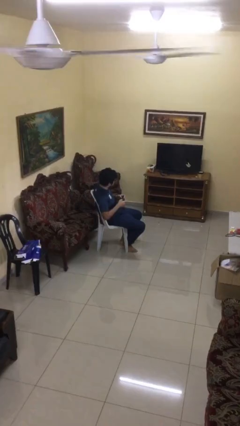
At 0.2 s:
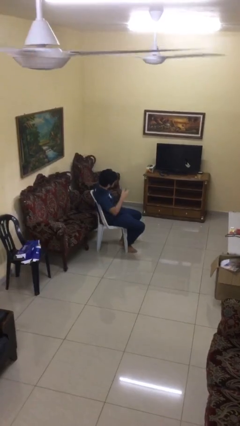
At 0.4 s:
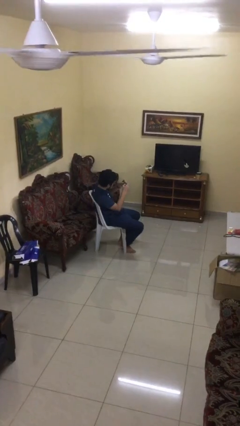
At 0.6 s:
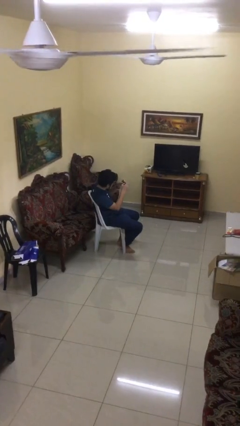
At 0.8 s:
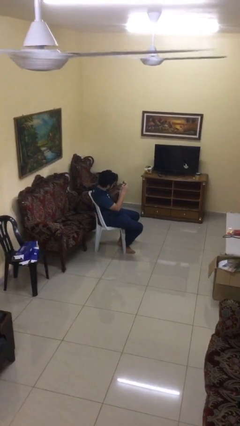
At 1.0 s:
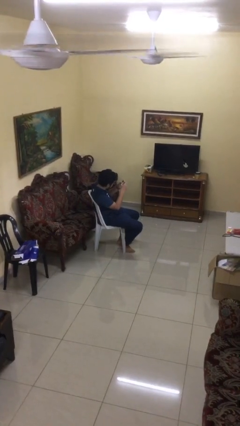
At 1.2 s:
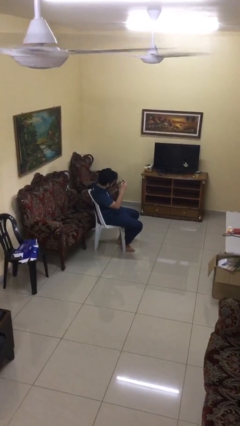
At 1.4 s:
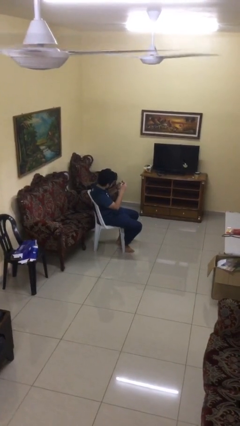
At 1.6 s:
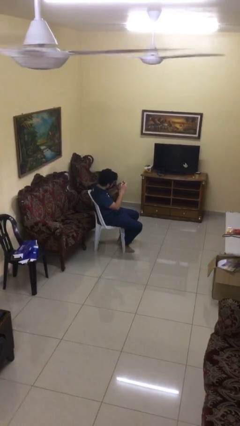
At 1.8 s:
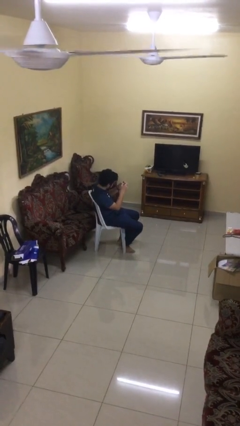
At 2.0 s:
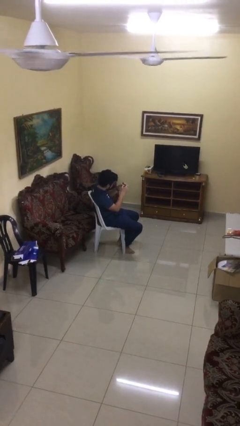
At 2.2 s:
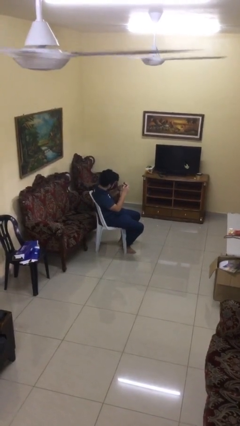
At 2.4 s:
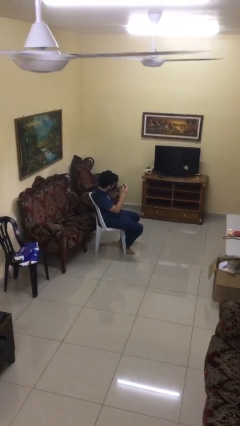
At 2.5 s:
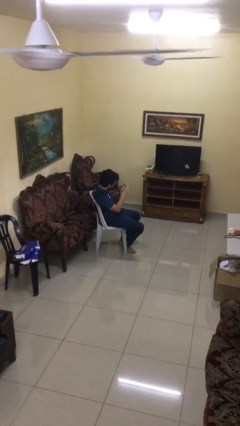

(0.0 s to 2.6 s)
person interacts with handheld game

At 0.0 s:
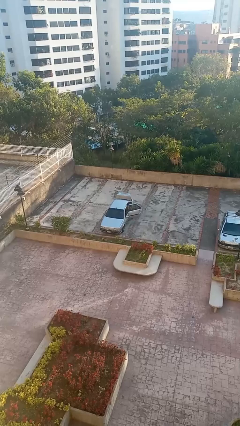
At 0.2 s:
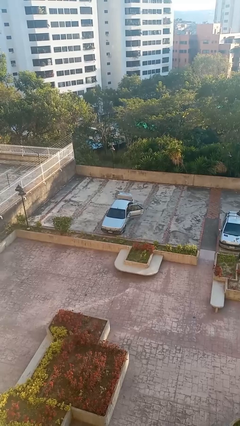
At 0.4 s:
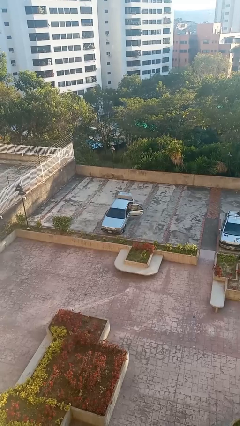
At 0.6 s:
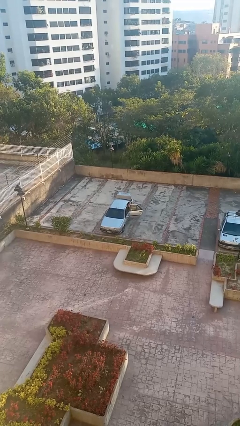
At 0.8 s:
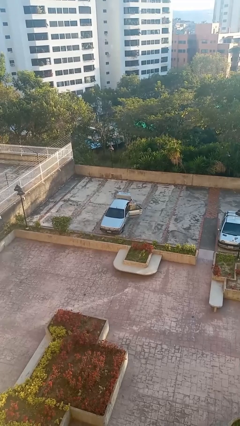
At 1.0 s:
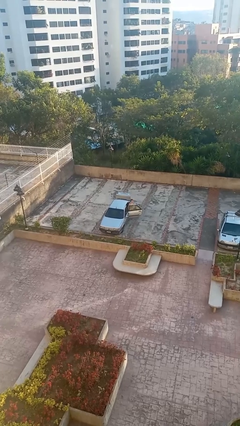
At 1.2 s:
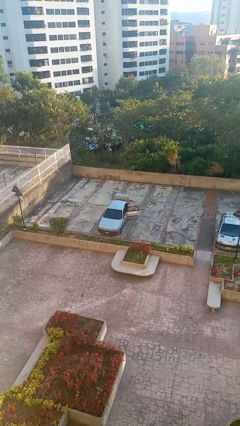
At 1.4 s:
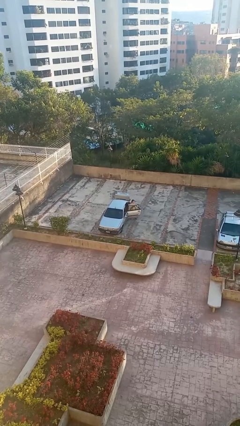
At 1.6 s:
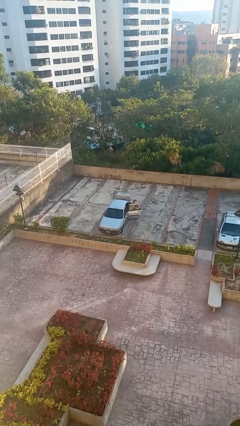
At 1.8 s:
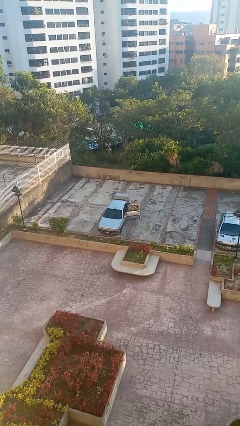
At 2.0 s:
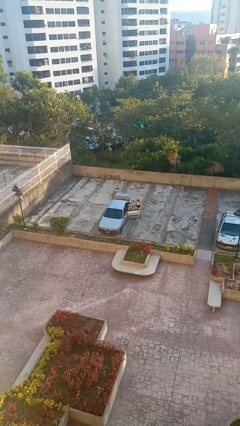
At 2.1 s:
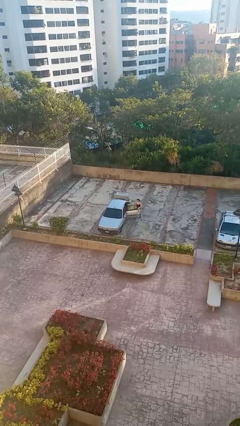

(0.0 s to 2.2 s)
car drops off person

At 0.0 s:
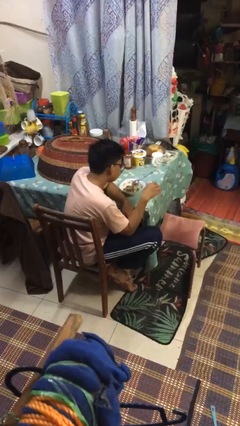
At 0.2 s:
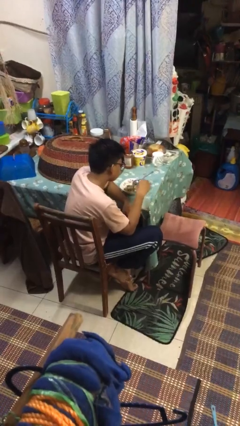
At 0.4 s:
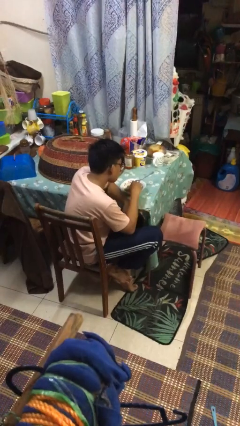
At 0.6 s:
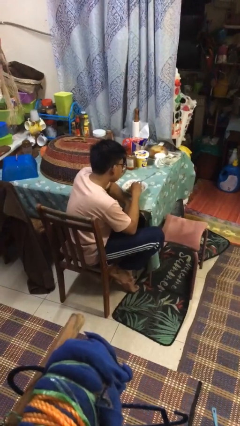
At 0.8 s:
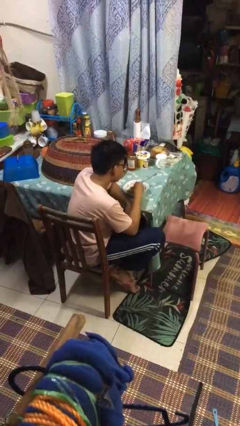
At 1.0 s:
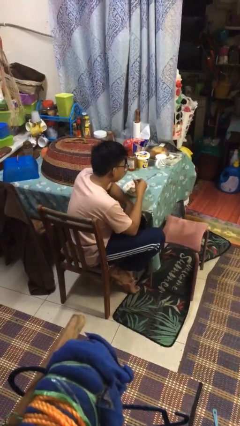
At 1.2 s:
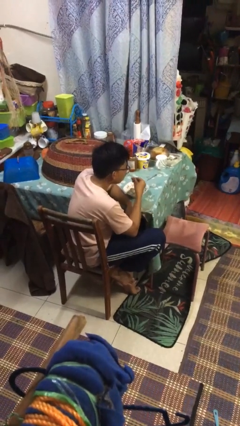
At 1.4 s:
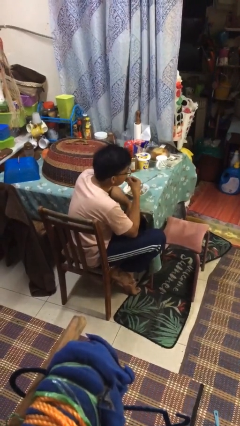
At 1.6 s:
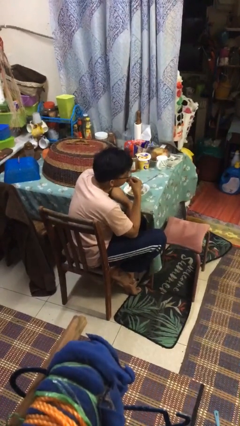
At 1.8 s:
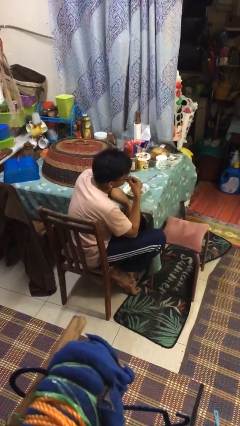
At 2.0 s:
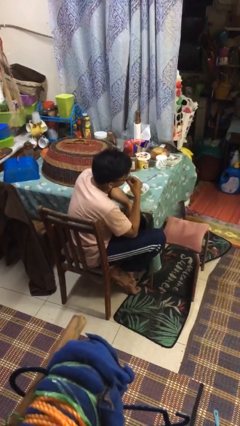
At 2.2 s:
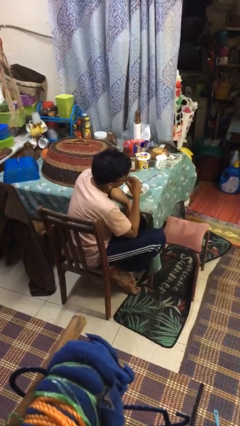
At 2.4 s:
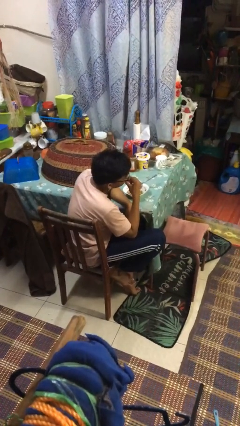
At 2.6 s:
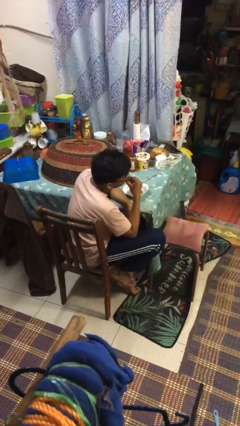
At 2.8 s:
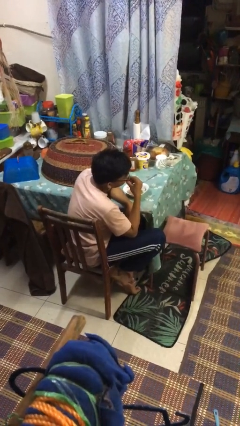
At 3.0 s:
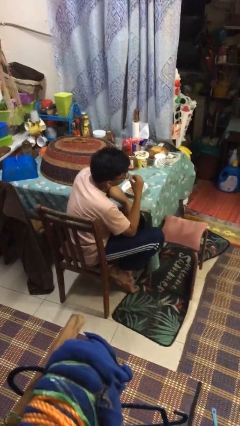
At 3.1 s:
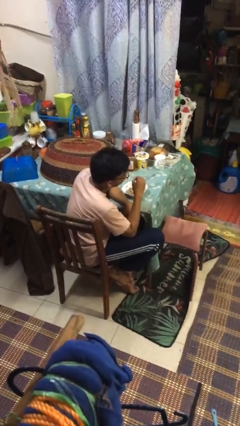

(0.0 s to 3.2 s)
person eats with hands

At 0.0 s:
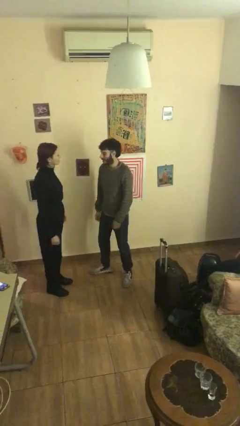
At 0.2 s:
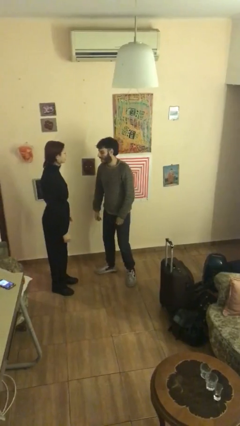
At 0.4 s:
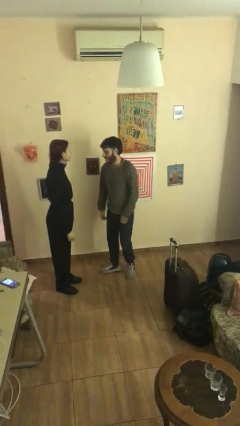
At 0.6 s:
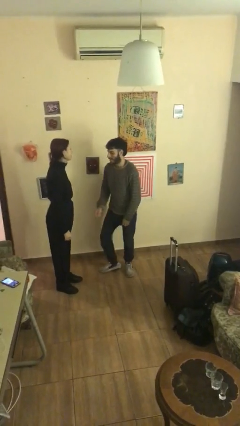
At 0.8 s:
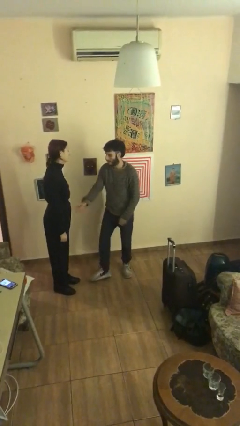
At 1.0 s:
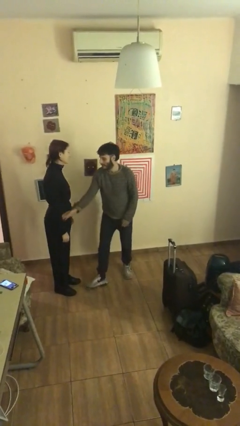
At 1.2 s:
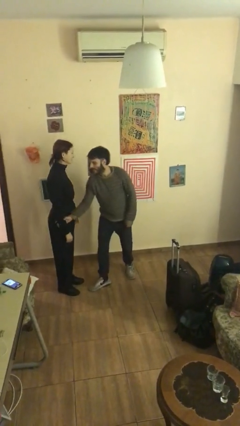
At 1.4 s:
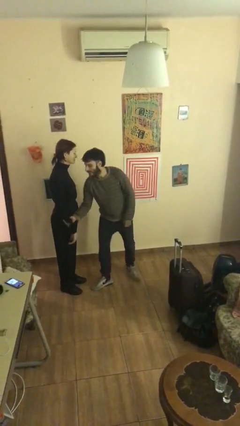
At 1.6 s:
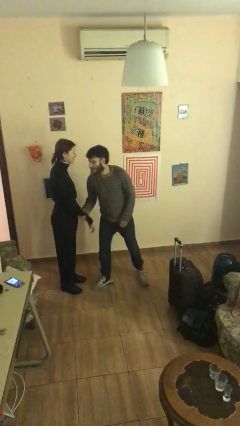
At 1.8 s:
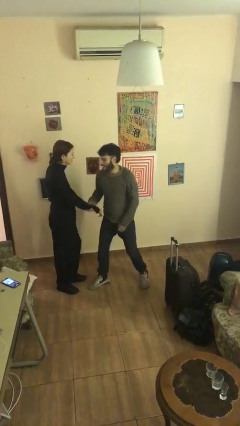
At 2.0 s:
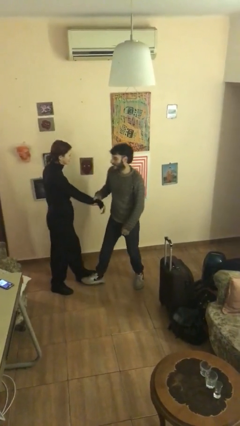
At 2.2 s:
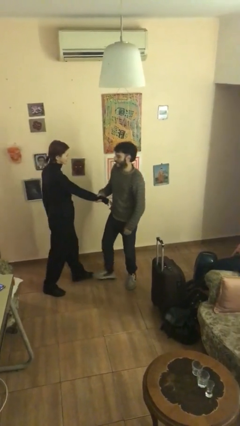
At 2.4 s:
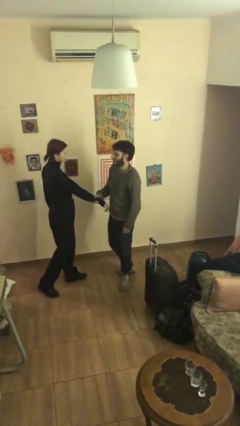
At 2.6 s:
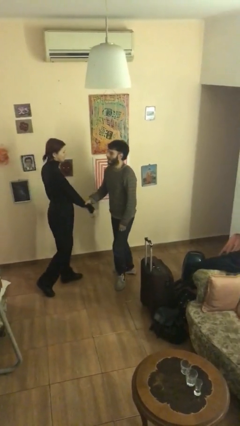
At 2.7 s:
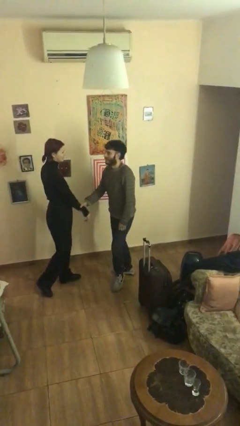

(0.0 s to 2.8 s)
person grabs person by forearm

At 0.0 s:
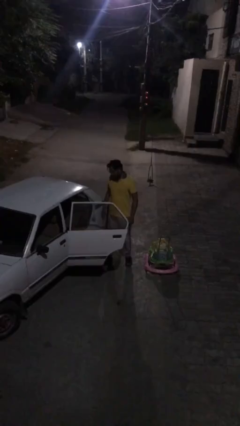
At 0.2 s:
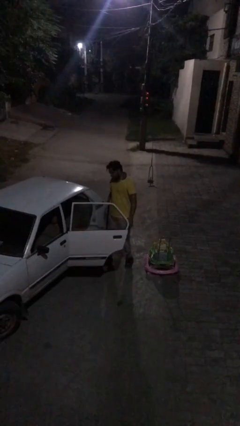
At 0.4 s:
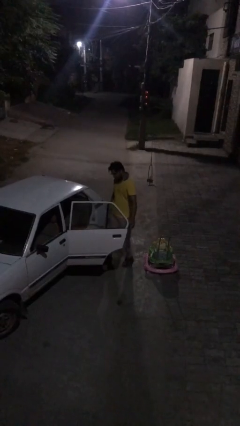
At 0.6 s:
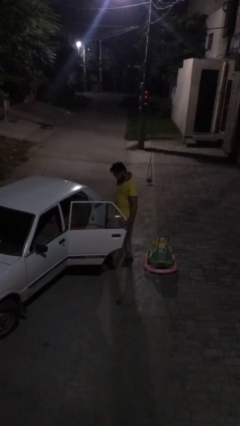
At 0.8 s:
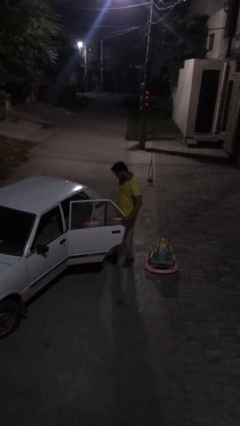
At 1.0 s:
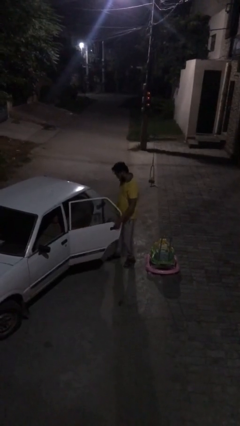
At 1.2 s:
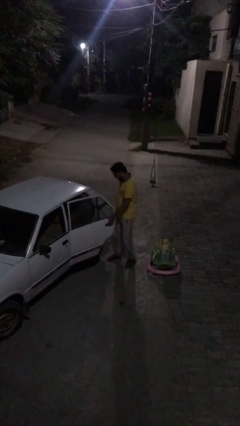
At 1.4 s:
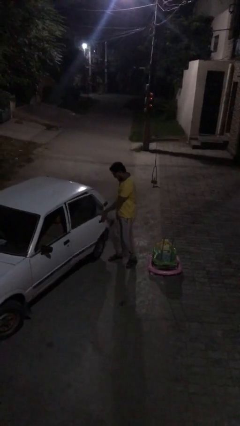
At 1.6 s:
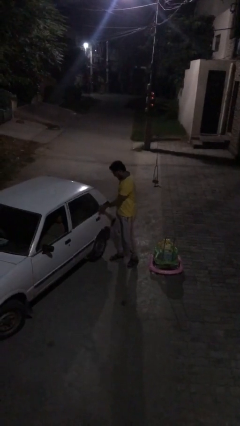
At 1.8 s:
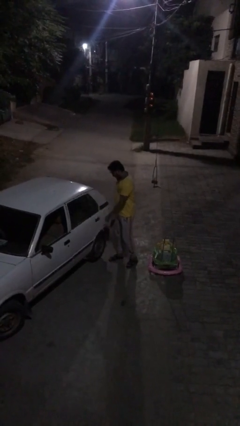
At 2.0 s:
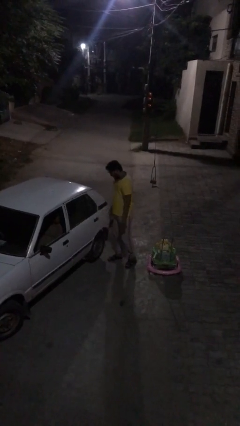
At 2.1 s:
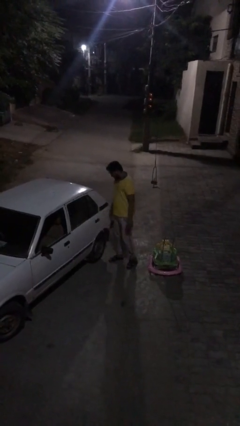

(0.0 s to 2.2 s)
person closes car door

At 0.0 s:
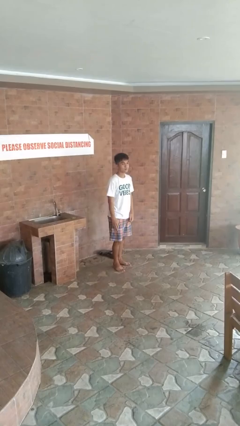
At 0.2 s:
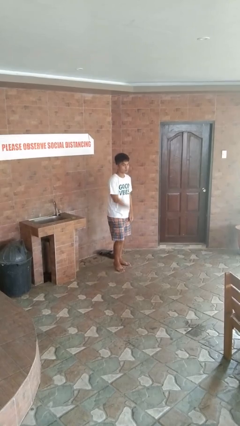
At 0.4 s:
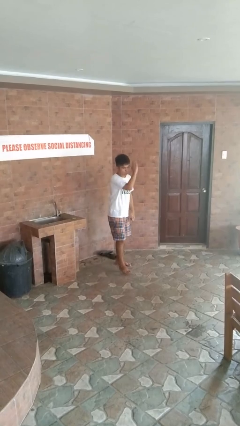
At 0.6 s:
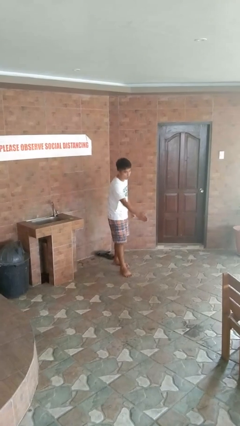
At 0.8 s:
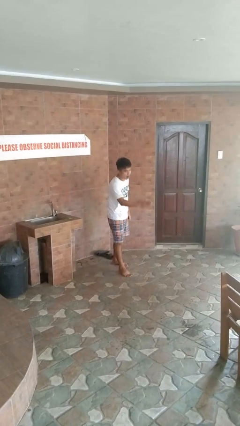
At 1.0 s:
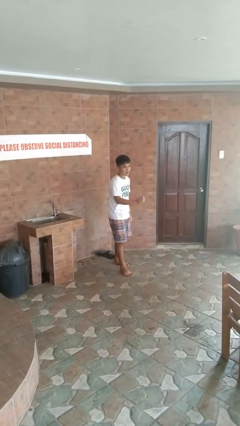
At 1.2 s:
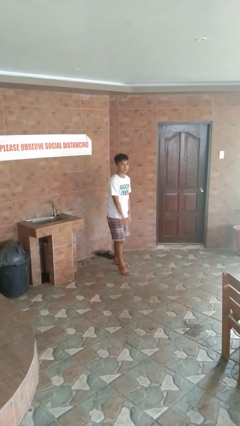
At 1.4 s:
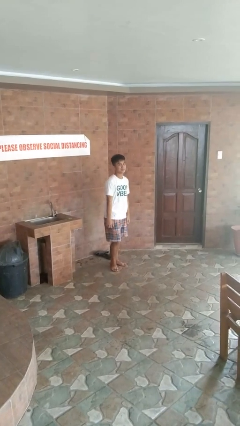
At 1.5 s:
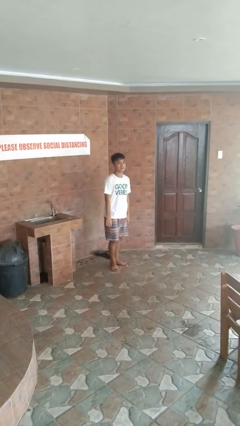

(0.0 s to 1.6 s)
person karate chop

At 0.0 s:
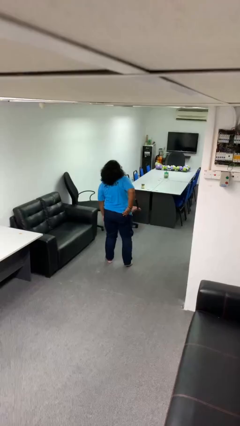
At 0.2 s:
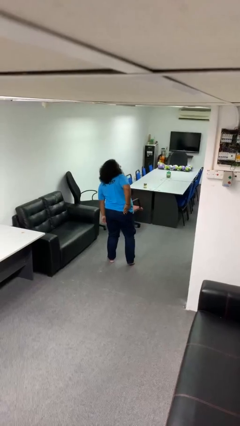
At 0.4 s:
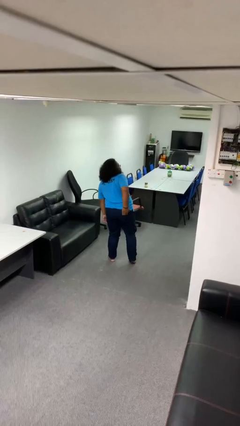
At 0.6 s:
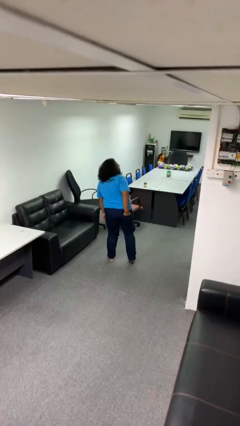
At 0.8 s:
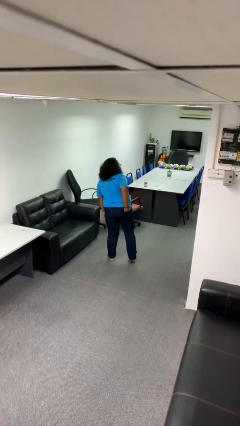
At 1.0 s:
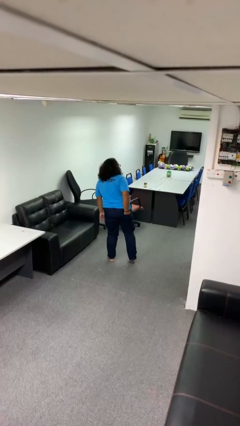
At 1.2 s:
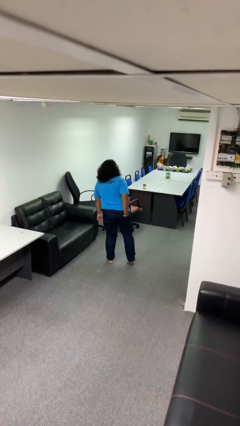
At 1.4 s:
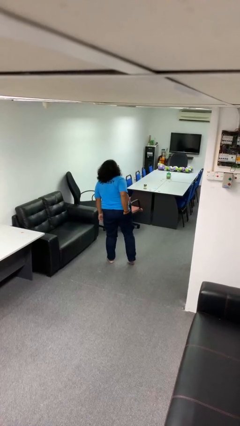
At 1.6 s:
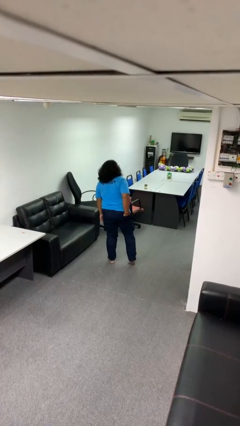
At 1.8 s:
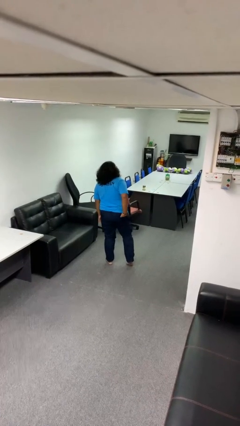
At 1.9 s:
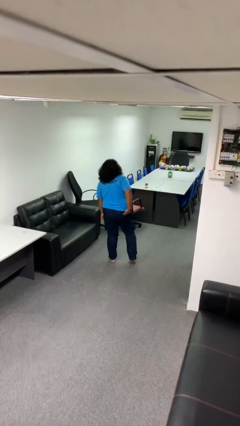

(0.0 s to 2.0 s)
person puts hands in back pockets

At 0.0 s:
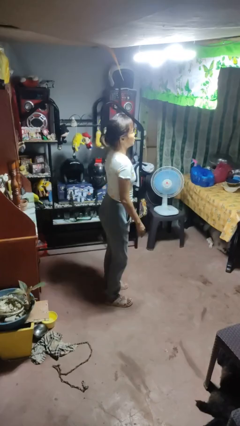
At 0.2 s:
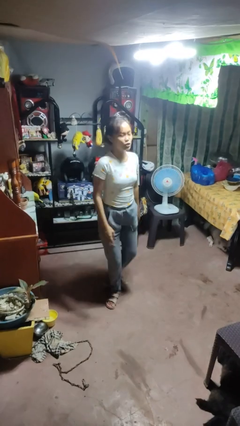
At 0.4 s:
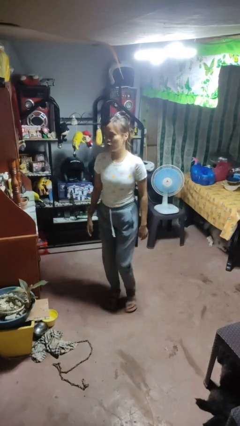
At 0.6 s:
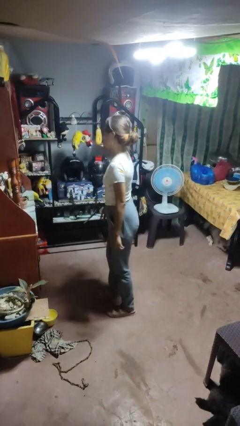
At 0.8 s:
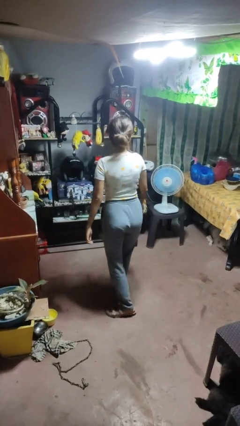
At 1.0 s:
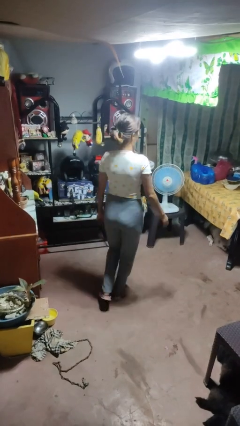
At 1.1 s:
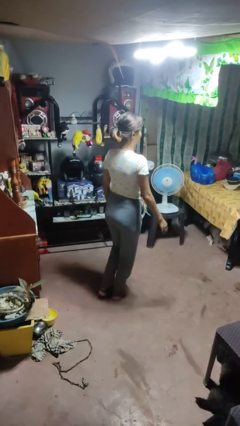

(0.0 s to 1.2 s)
person twirls
